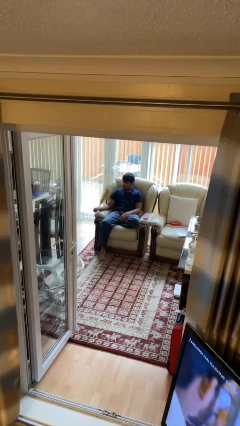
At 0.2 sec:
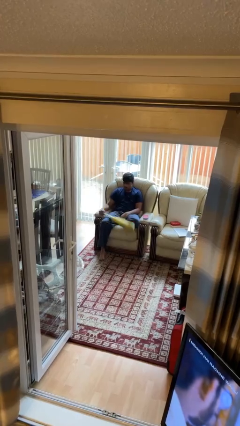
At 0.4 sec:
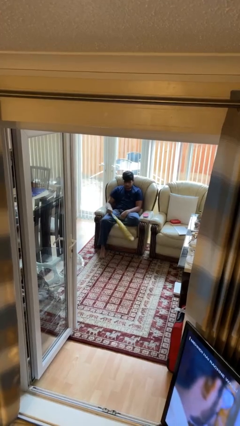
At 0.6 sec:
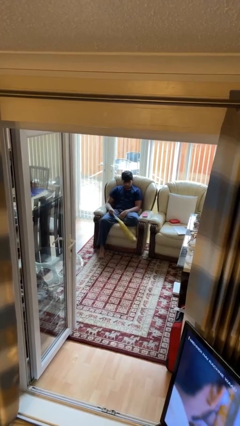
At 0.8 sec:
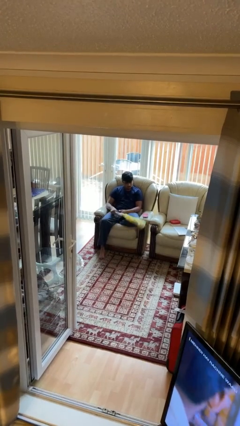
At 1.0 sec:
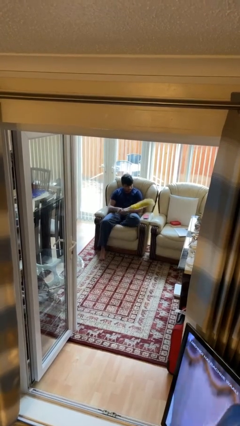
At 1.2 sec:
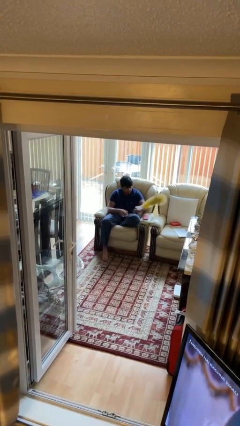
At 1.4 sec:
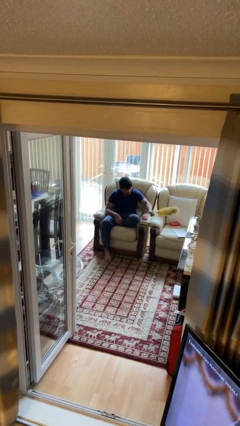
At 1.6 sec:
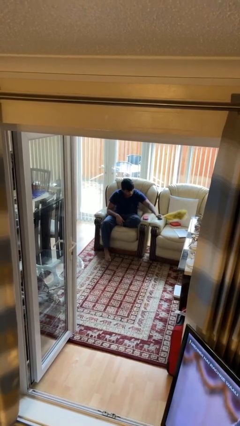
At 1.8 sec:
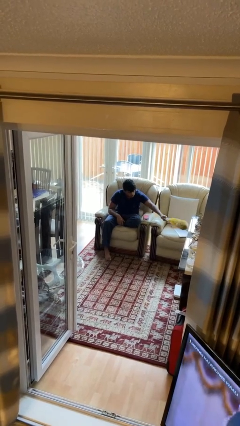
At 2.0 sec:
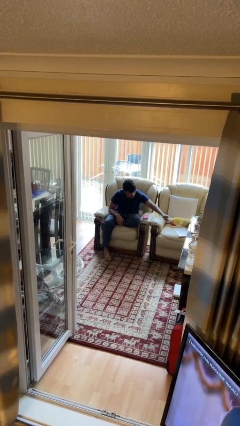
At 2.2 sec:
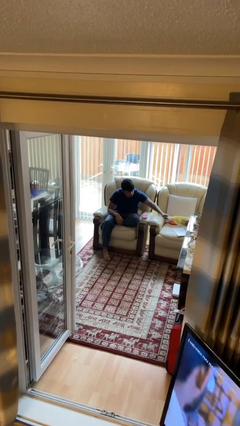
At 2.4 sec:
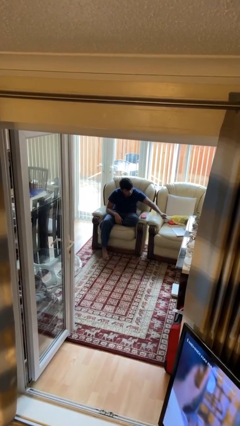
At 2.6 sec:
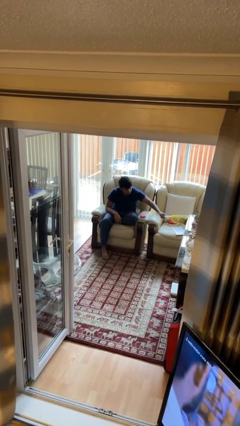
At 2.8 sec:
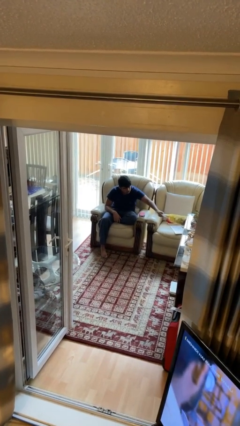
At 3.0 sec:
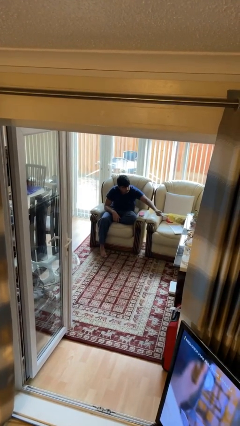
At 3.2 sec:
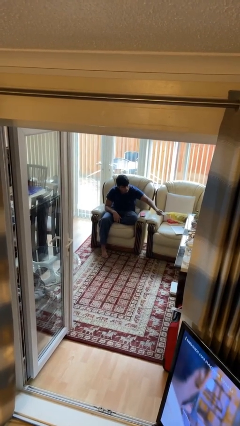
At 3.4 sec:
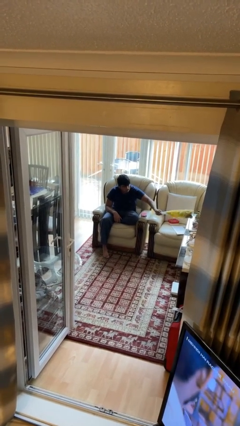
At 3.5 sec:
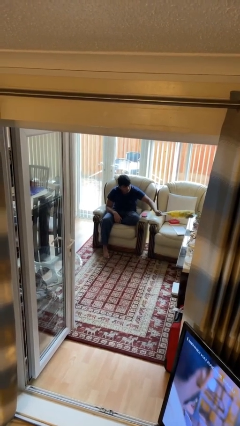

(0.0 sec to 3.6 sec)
person dusts furniture

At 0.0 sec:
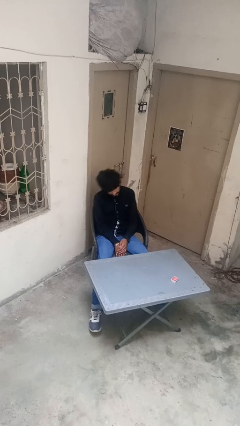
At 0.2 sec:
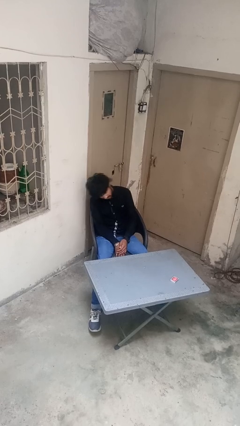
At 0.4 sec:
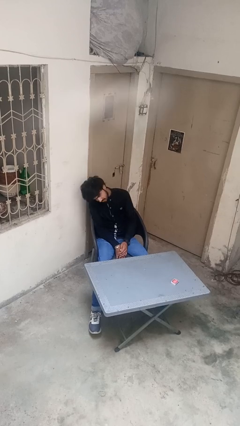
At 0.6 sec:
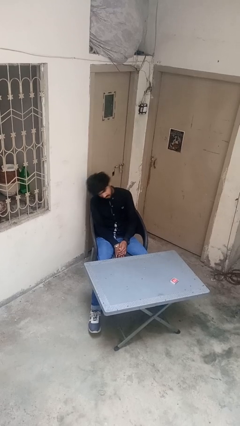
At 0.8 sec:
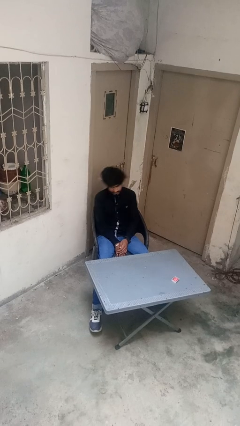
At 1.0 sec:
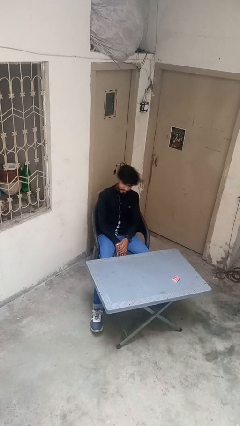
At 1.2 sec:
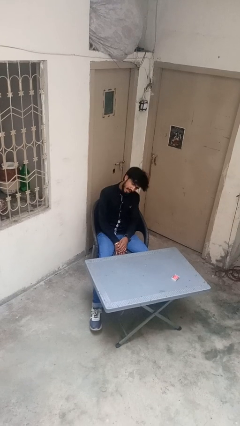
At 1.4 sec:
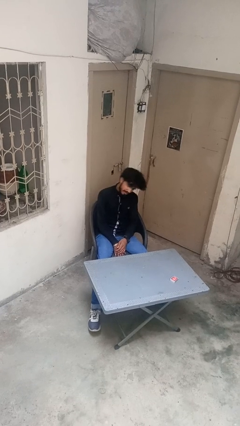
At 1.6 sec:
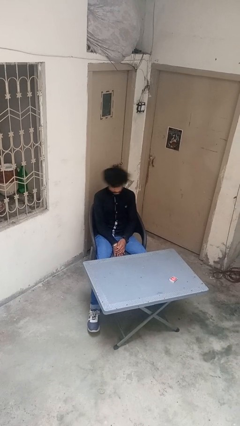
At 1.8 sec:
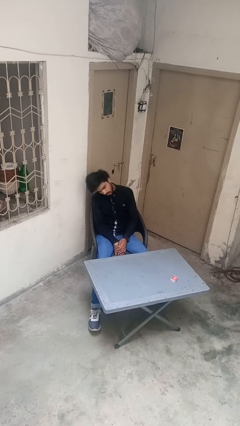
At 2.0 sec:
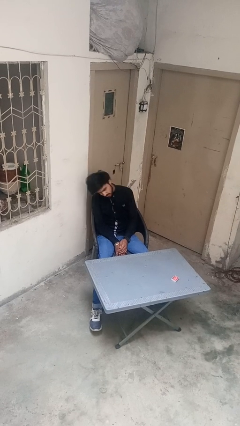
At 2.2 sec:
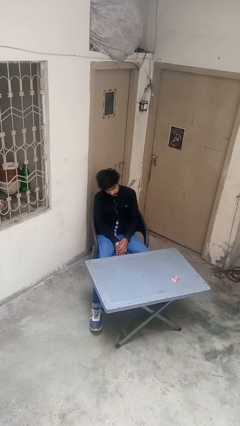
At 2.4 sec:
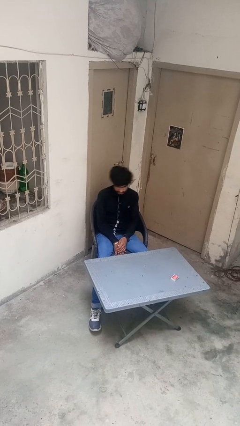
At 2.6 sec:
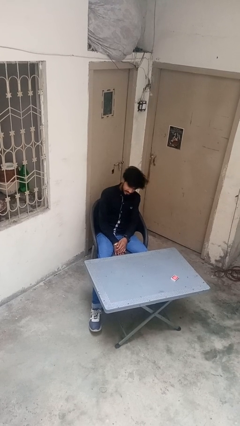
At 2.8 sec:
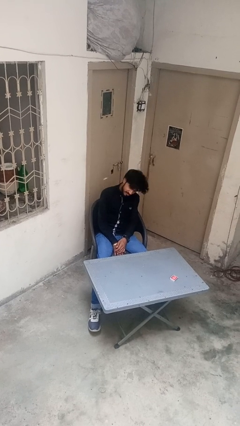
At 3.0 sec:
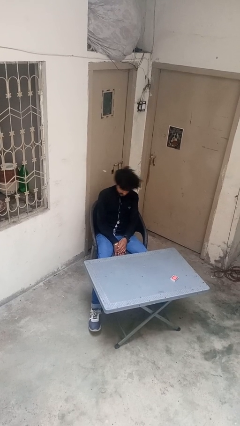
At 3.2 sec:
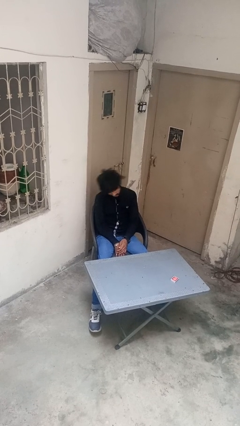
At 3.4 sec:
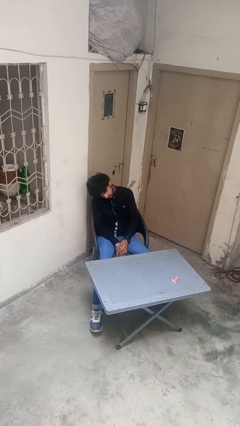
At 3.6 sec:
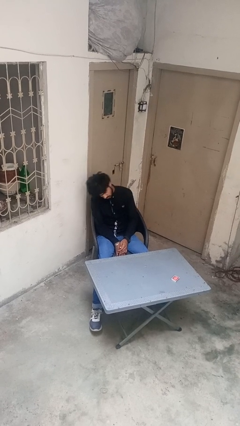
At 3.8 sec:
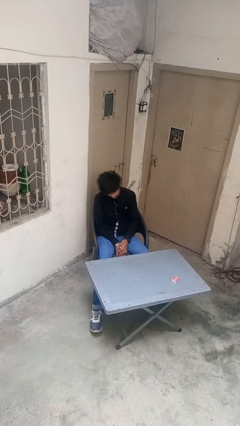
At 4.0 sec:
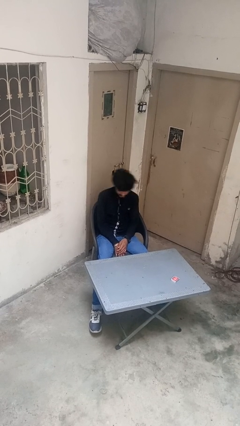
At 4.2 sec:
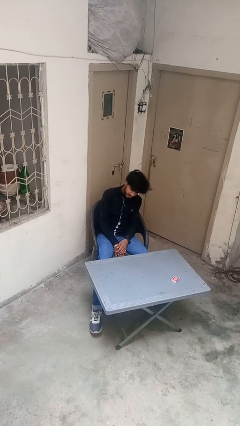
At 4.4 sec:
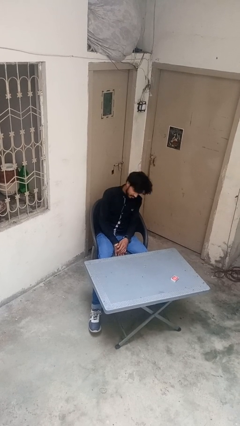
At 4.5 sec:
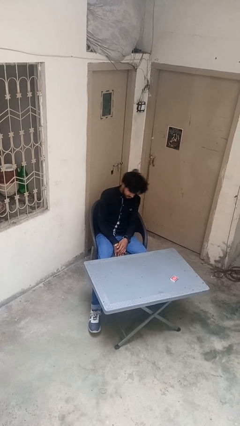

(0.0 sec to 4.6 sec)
person shakes head

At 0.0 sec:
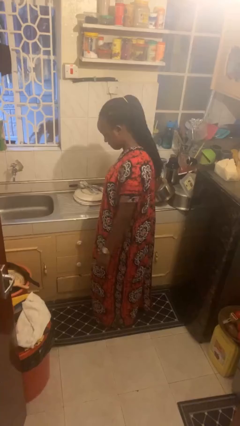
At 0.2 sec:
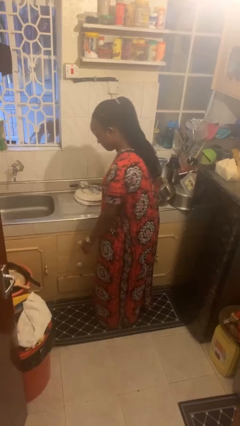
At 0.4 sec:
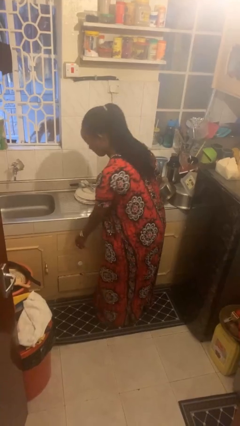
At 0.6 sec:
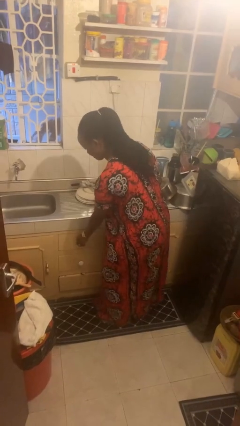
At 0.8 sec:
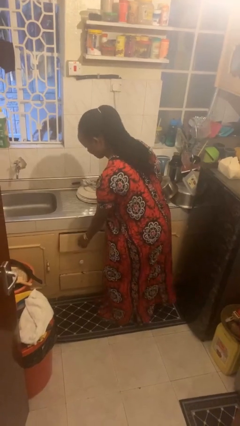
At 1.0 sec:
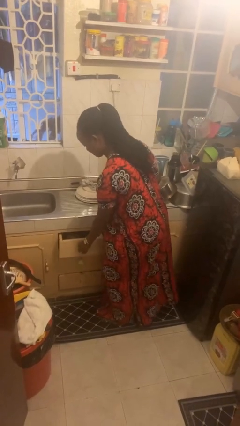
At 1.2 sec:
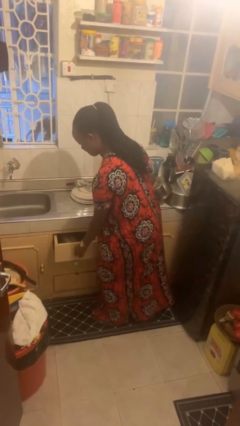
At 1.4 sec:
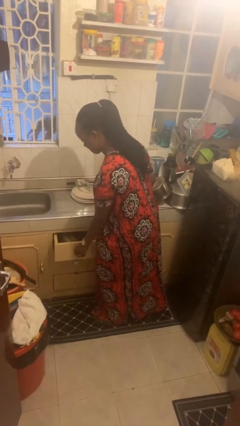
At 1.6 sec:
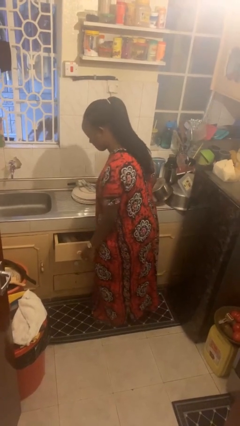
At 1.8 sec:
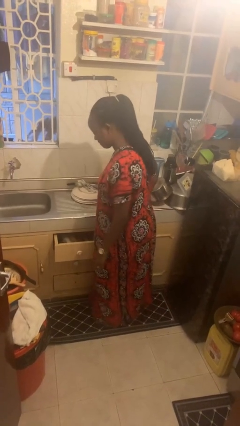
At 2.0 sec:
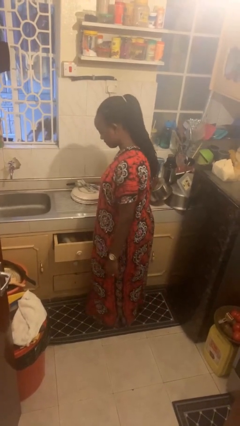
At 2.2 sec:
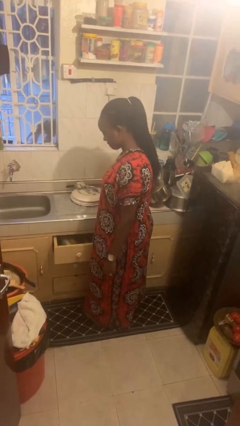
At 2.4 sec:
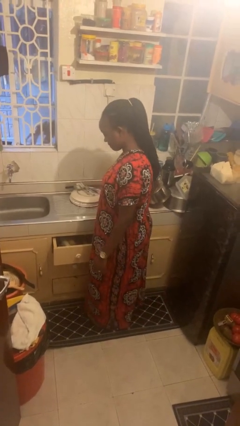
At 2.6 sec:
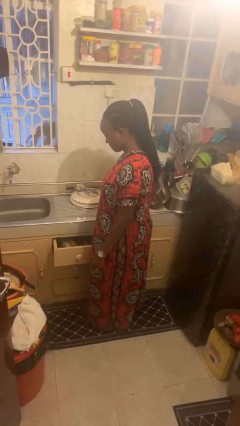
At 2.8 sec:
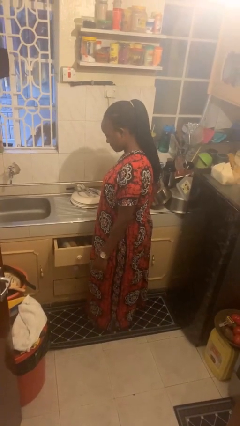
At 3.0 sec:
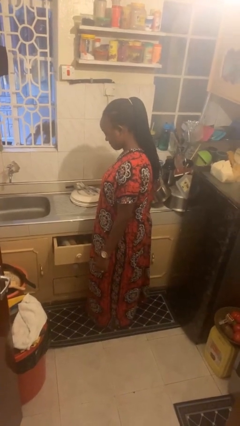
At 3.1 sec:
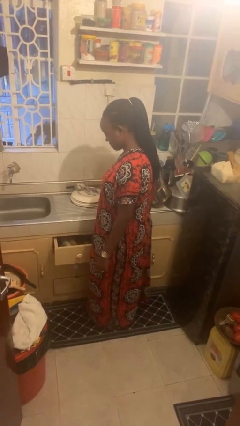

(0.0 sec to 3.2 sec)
person opens kitchen drawer

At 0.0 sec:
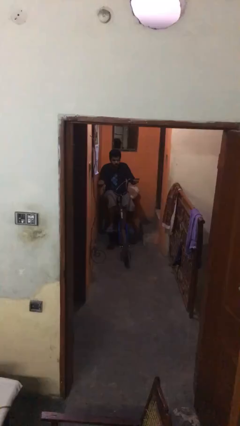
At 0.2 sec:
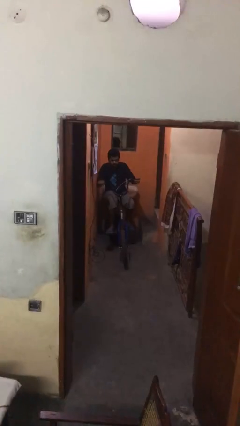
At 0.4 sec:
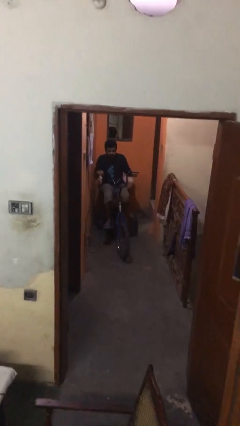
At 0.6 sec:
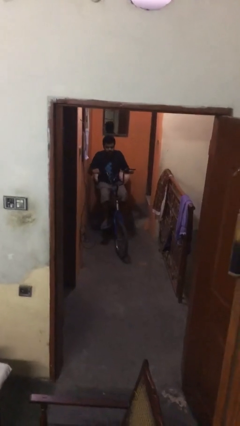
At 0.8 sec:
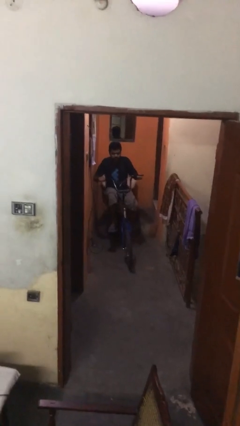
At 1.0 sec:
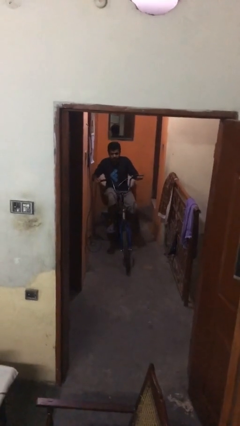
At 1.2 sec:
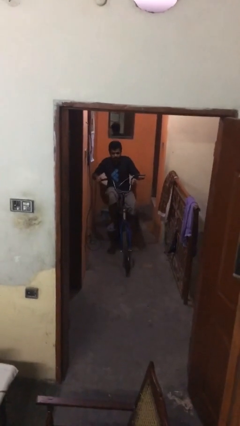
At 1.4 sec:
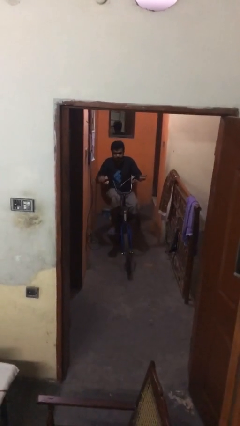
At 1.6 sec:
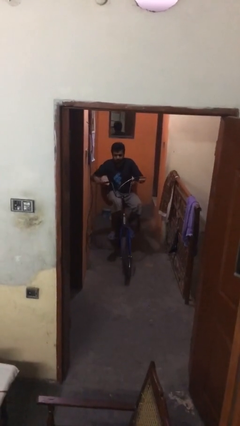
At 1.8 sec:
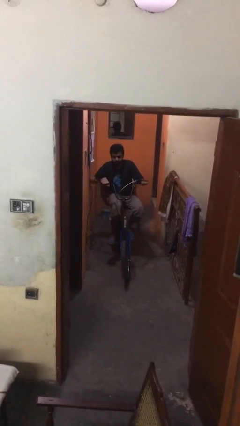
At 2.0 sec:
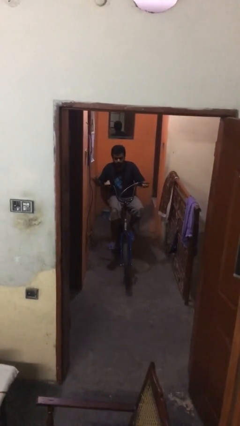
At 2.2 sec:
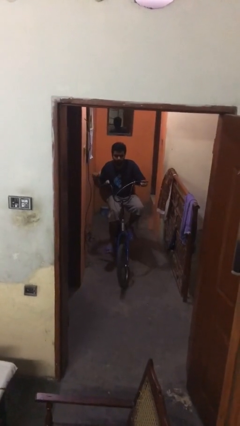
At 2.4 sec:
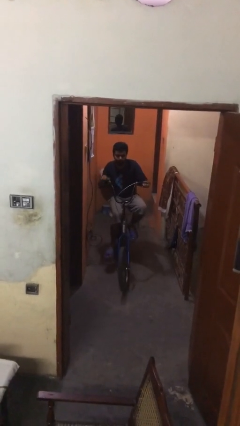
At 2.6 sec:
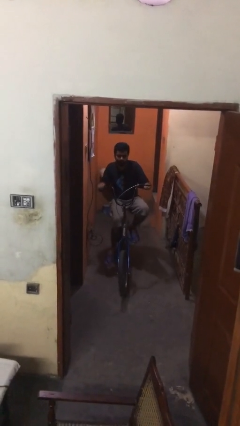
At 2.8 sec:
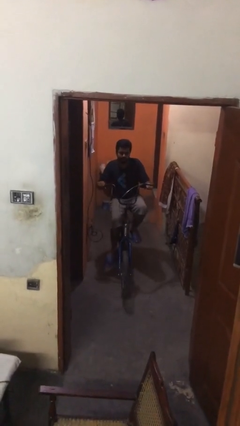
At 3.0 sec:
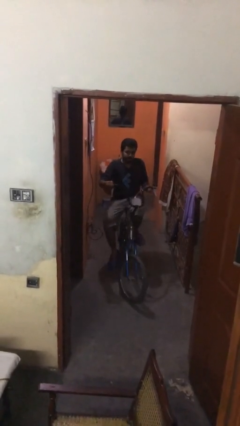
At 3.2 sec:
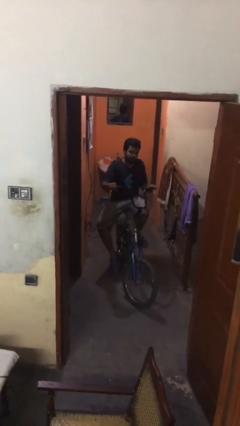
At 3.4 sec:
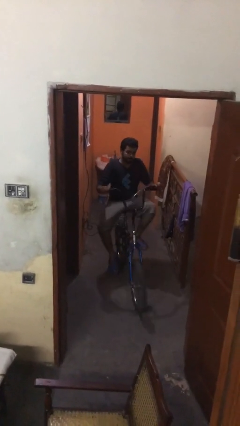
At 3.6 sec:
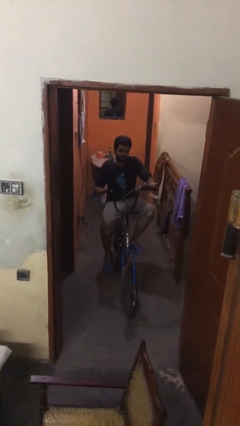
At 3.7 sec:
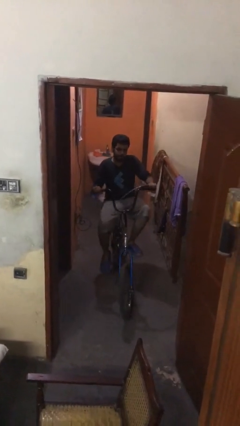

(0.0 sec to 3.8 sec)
person rides bicycle

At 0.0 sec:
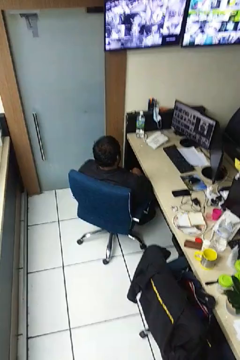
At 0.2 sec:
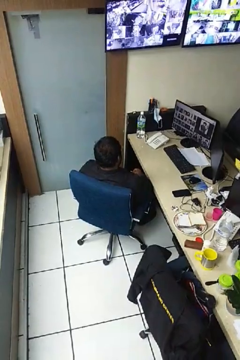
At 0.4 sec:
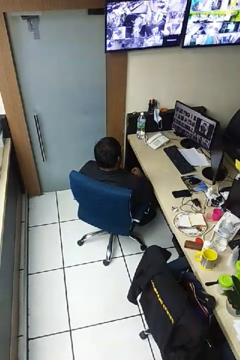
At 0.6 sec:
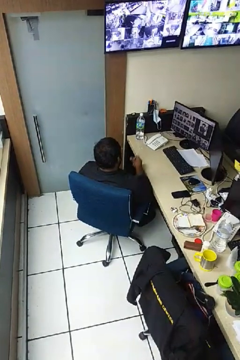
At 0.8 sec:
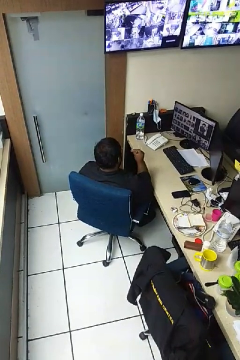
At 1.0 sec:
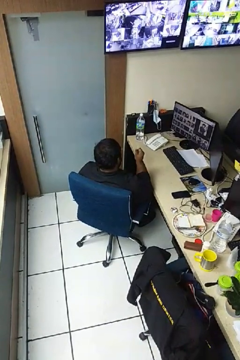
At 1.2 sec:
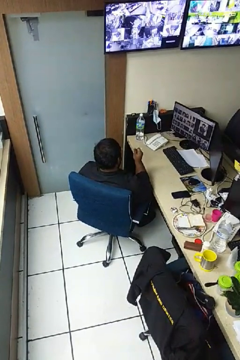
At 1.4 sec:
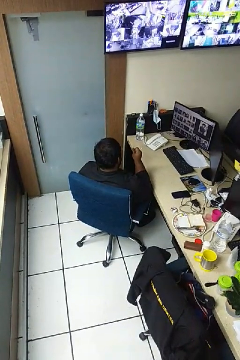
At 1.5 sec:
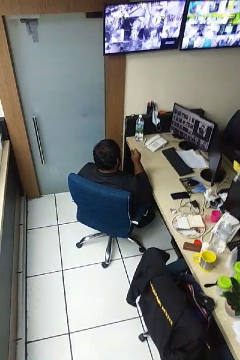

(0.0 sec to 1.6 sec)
person snaps fingers

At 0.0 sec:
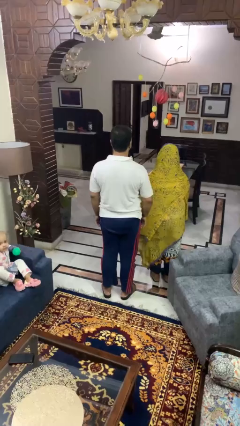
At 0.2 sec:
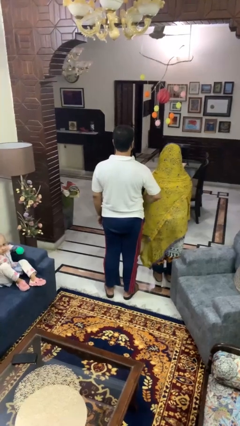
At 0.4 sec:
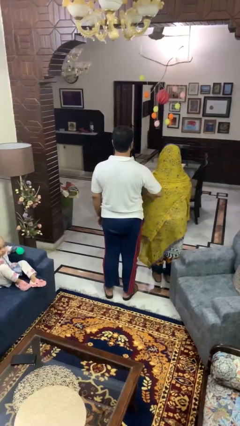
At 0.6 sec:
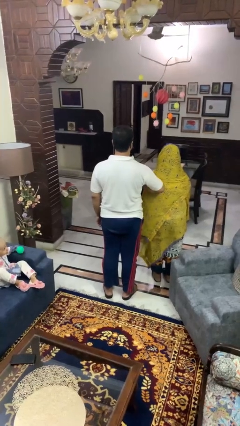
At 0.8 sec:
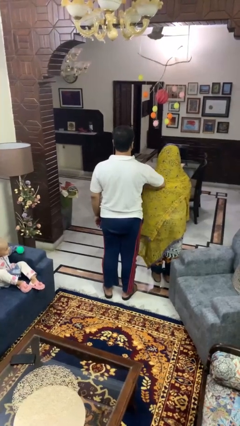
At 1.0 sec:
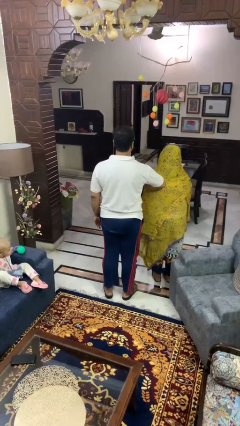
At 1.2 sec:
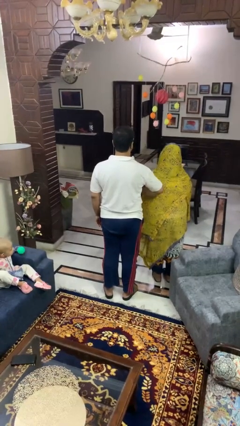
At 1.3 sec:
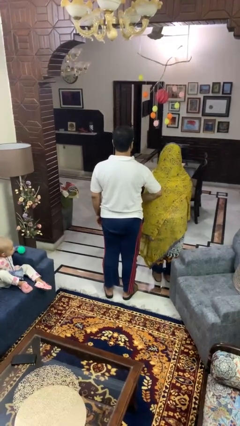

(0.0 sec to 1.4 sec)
person nudges person with elbow
